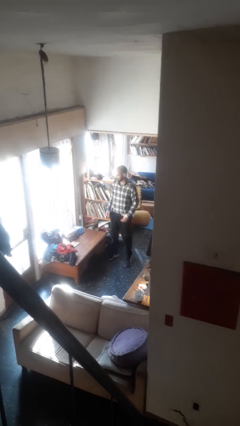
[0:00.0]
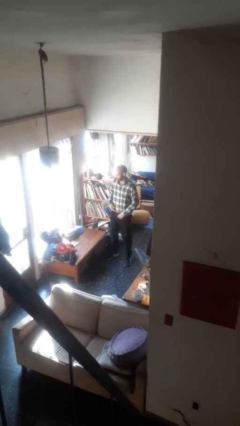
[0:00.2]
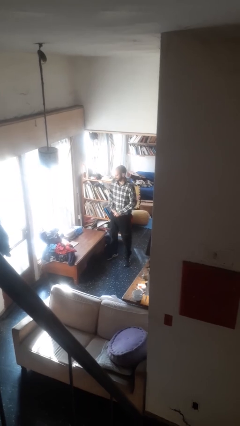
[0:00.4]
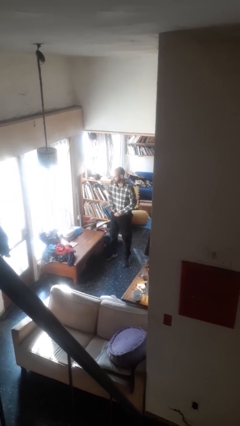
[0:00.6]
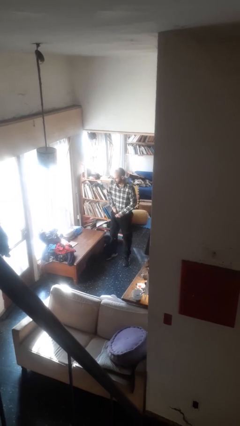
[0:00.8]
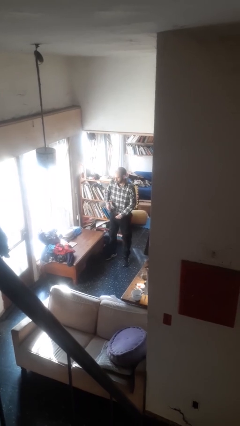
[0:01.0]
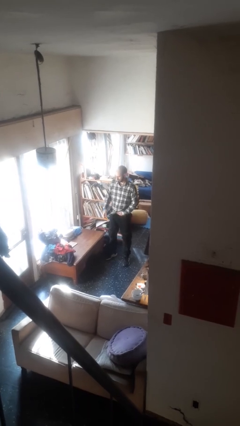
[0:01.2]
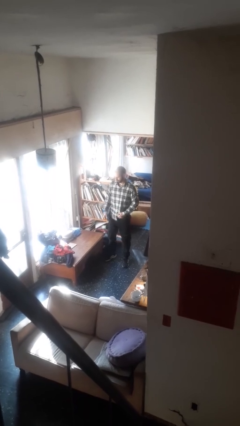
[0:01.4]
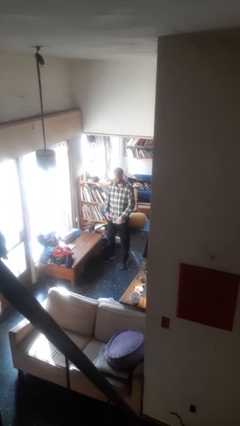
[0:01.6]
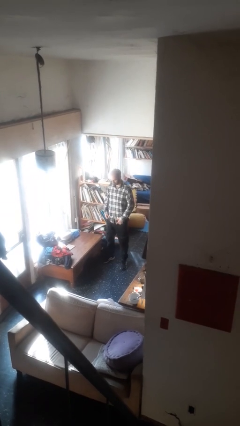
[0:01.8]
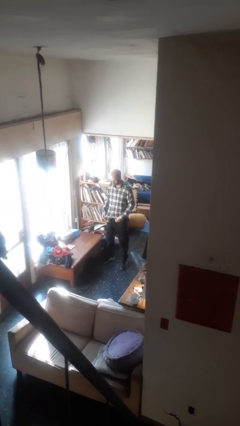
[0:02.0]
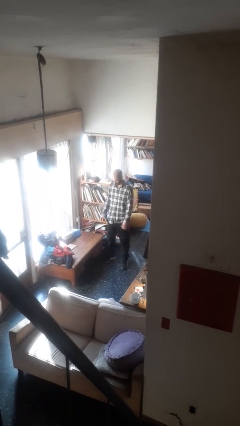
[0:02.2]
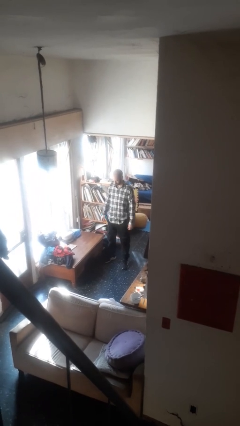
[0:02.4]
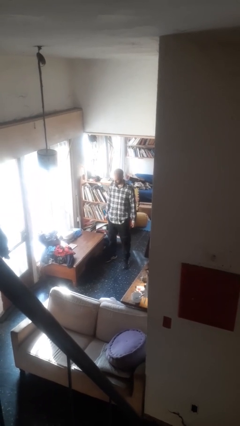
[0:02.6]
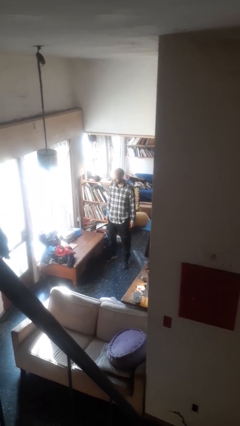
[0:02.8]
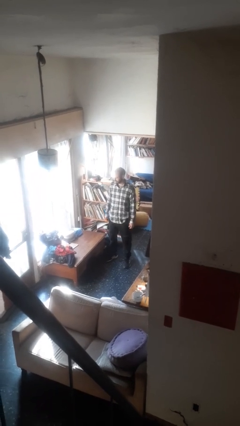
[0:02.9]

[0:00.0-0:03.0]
person untucks shirt

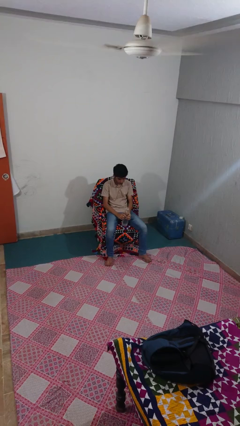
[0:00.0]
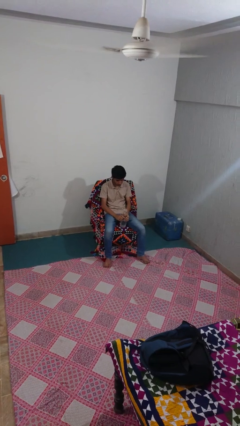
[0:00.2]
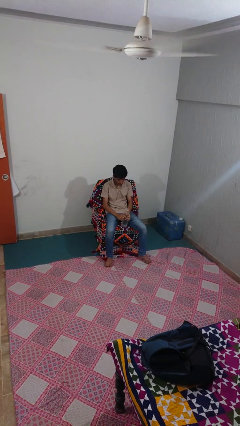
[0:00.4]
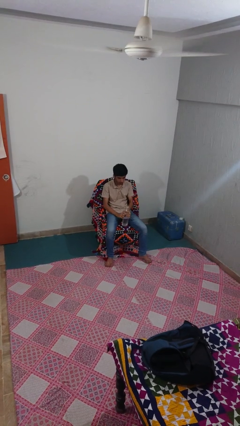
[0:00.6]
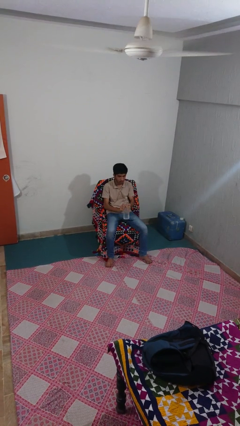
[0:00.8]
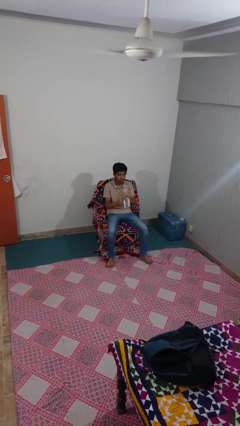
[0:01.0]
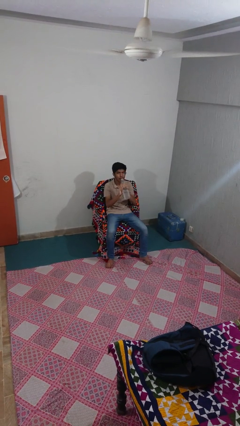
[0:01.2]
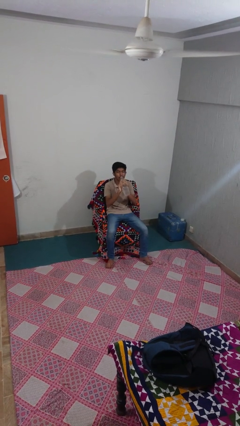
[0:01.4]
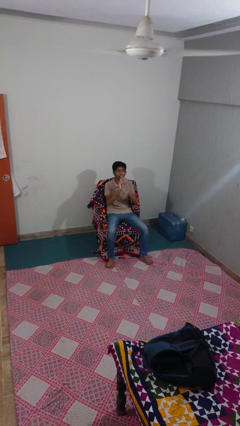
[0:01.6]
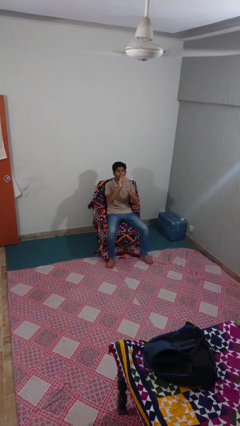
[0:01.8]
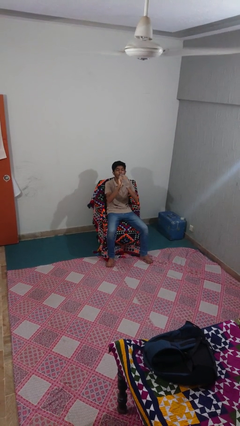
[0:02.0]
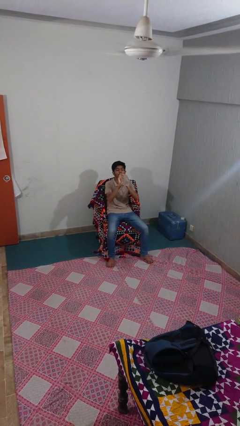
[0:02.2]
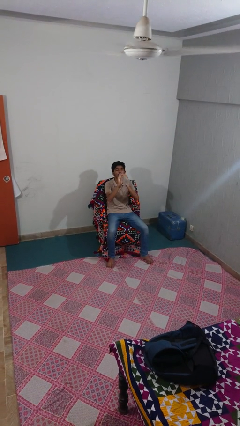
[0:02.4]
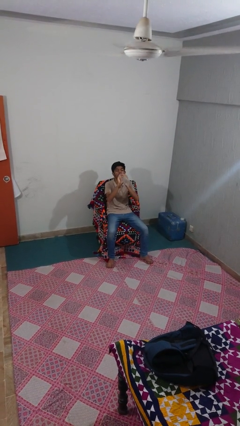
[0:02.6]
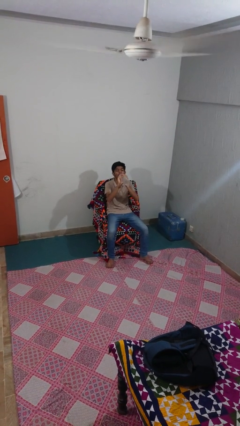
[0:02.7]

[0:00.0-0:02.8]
person drinks from bottle

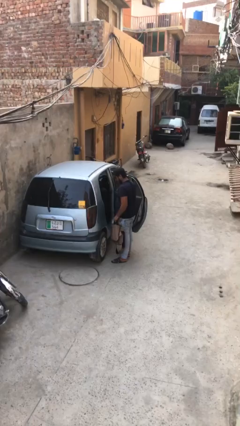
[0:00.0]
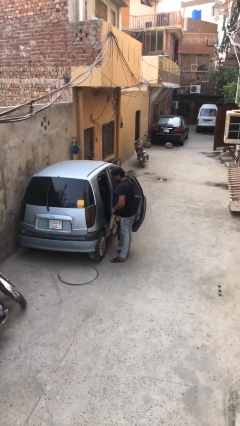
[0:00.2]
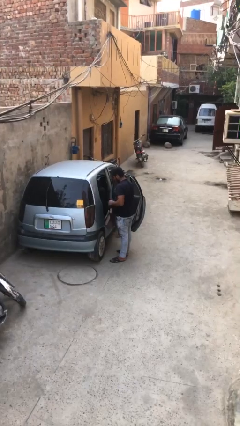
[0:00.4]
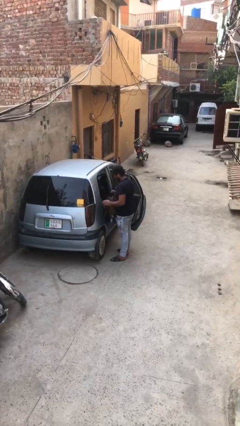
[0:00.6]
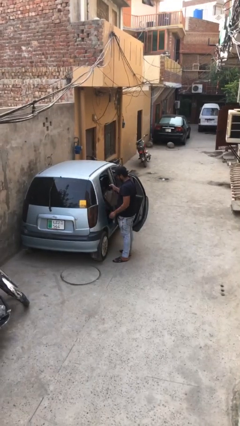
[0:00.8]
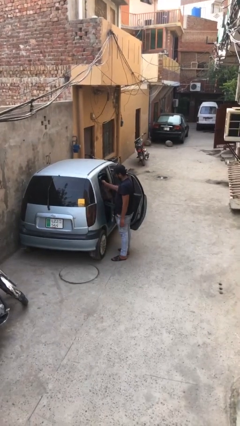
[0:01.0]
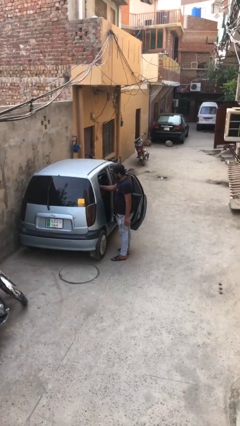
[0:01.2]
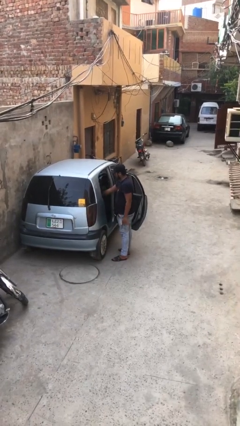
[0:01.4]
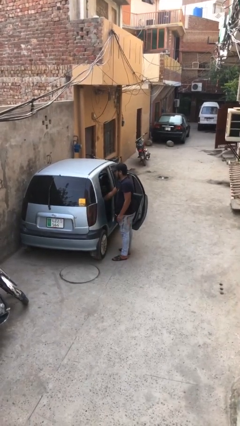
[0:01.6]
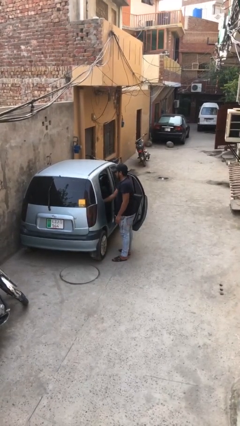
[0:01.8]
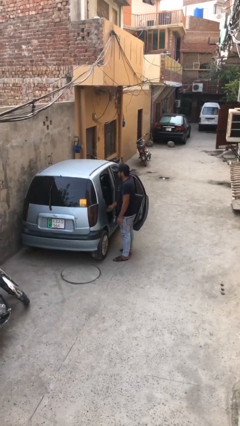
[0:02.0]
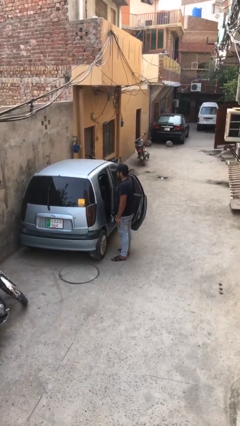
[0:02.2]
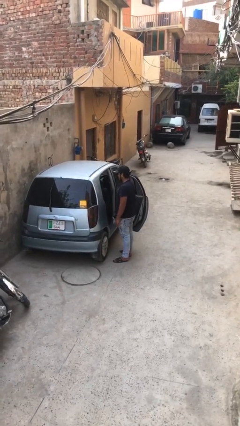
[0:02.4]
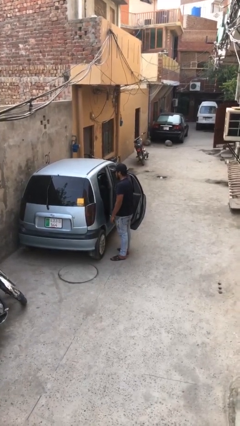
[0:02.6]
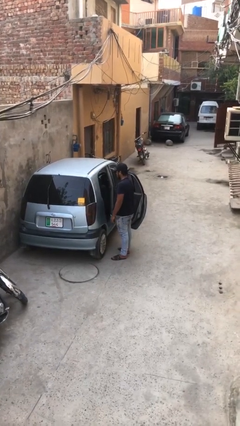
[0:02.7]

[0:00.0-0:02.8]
person loads car

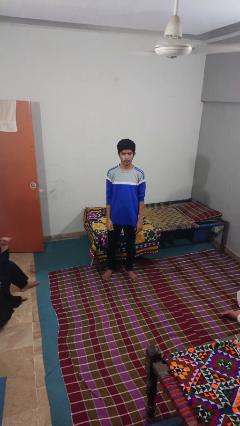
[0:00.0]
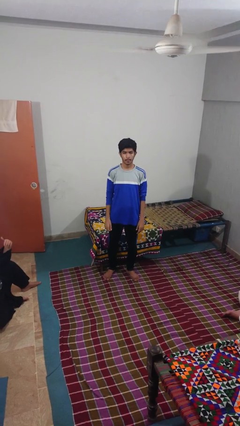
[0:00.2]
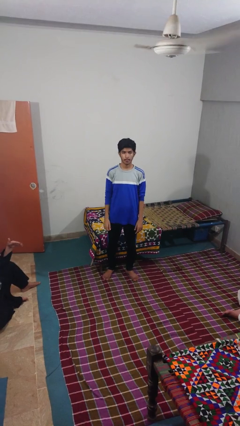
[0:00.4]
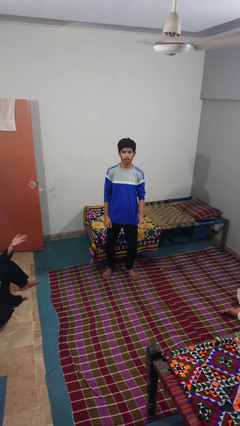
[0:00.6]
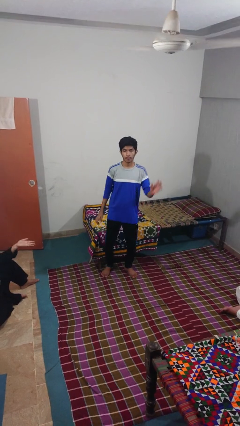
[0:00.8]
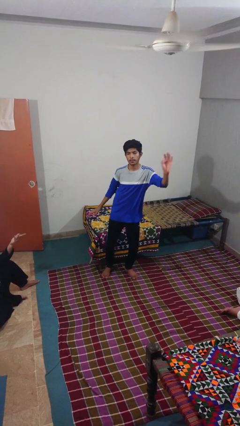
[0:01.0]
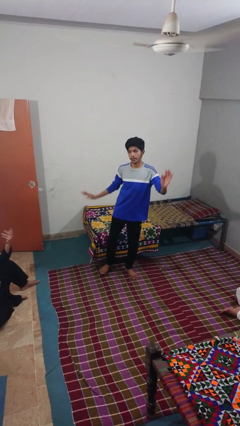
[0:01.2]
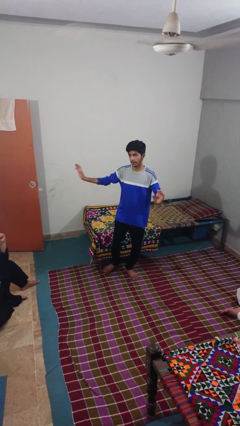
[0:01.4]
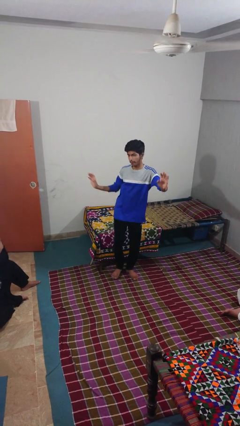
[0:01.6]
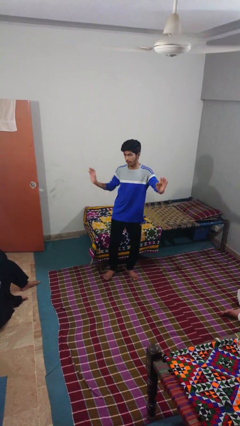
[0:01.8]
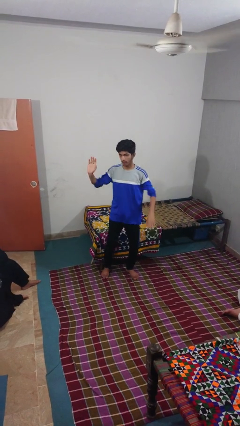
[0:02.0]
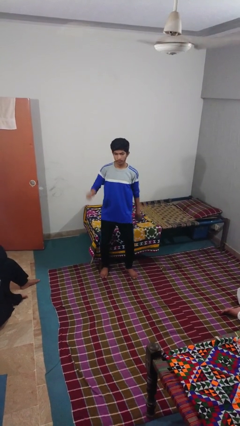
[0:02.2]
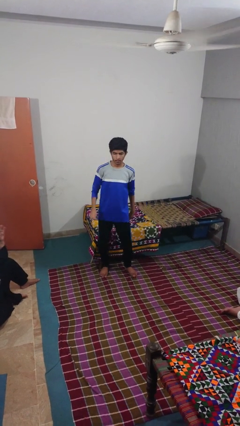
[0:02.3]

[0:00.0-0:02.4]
person dances in place

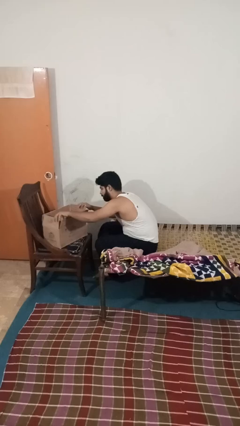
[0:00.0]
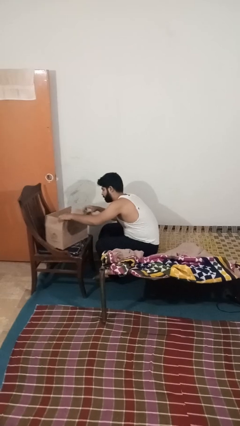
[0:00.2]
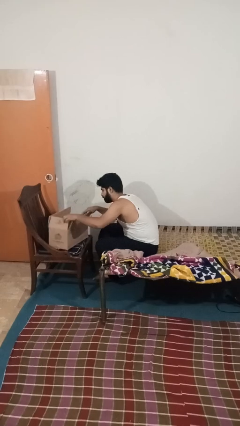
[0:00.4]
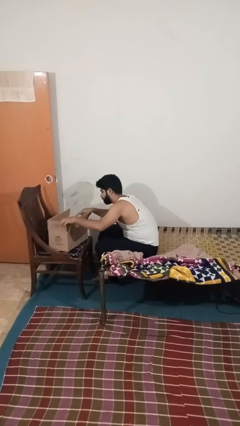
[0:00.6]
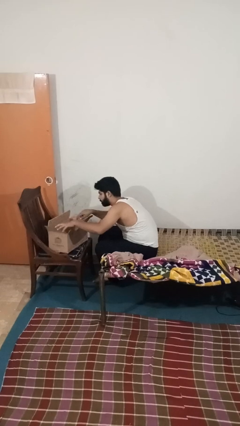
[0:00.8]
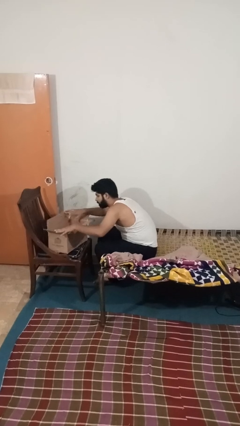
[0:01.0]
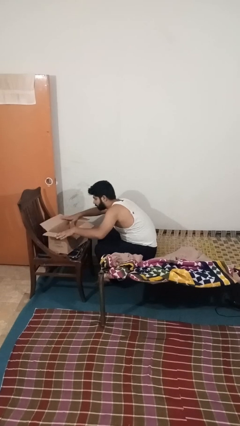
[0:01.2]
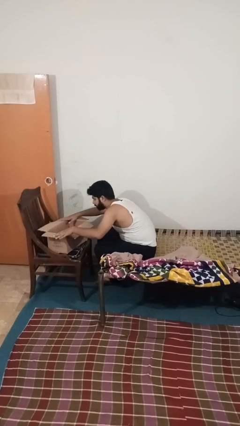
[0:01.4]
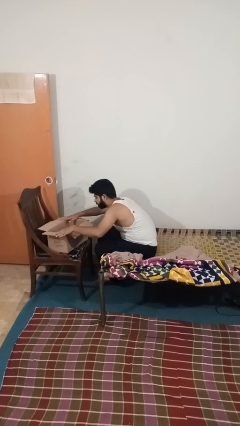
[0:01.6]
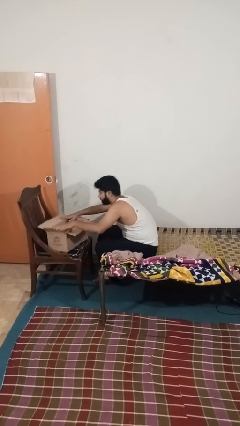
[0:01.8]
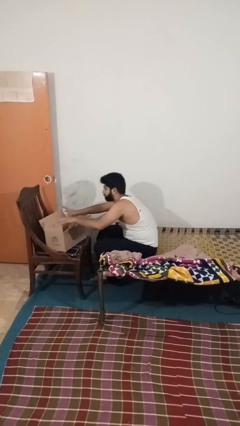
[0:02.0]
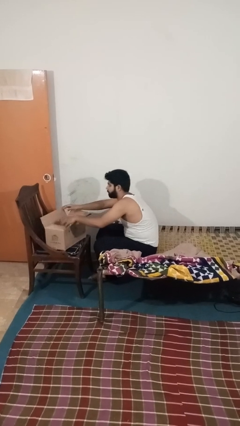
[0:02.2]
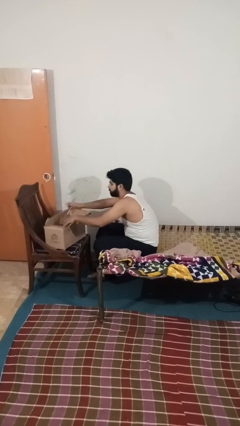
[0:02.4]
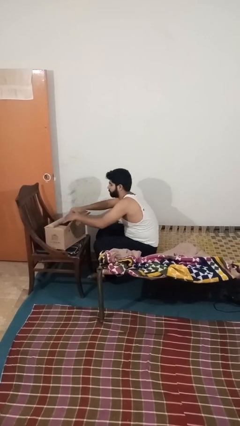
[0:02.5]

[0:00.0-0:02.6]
person opens box

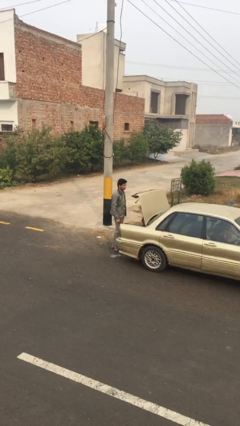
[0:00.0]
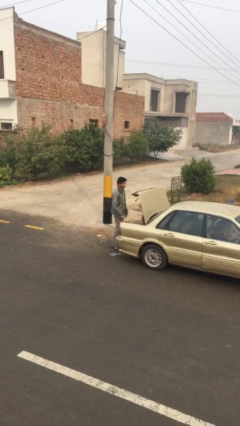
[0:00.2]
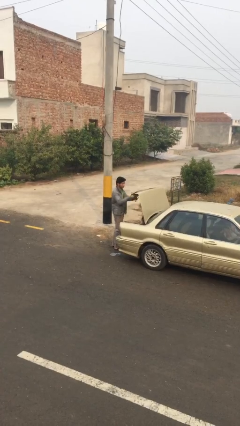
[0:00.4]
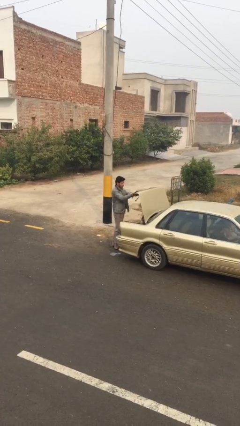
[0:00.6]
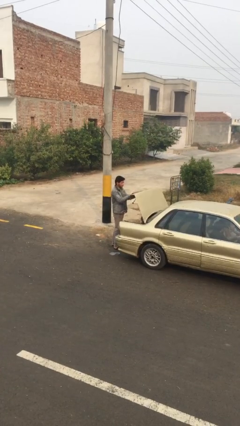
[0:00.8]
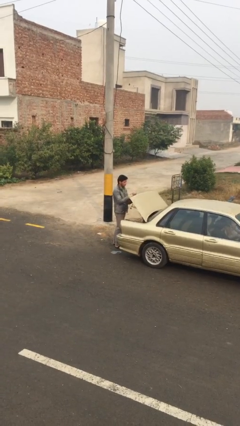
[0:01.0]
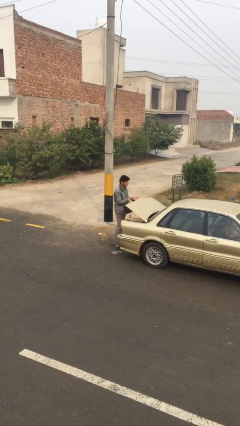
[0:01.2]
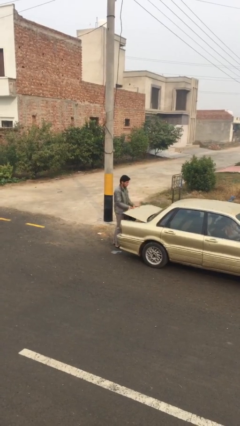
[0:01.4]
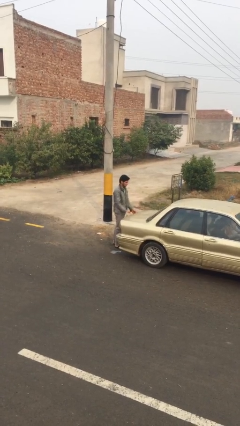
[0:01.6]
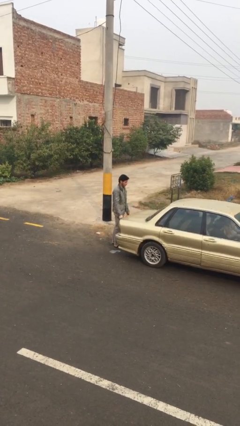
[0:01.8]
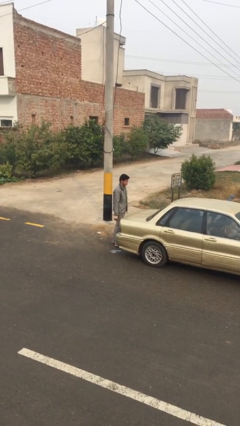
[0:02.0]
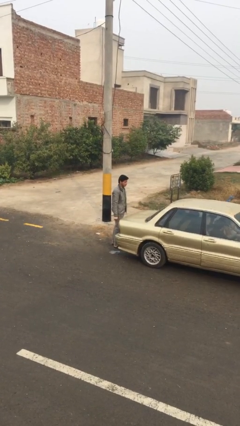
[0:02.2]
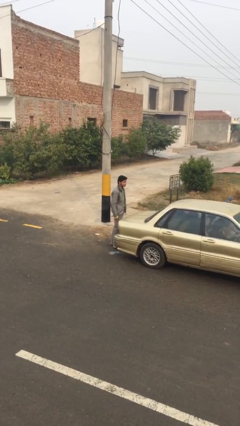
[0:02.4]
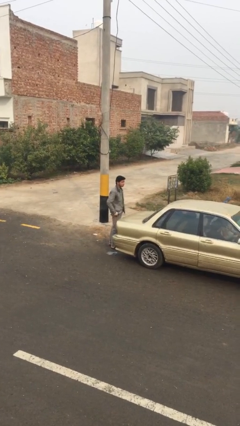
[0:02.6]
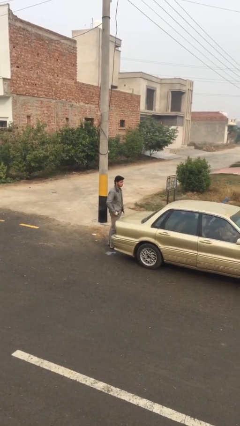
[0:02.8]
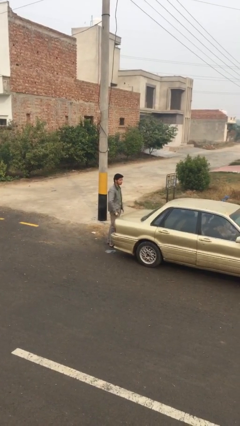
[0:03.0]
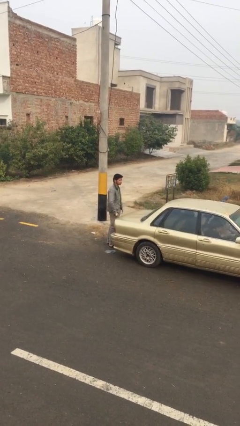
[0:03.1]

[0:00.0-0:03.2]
person closes car trunk

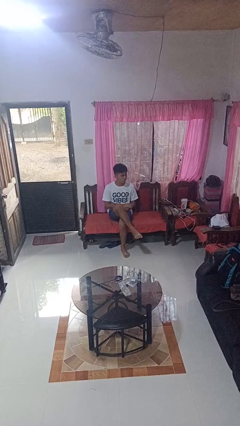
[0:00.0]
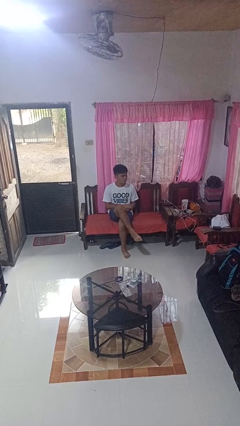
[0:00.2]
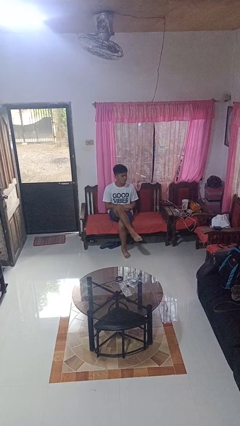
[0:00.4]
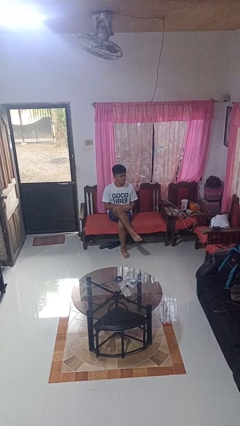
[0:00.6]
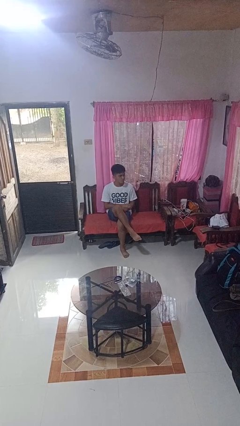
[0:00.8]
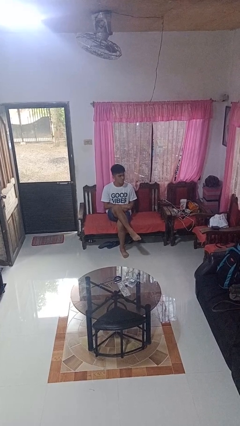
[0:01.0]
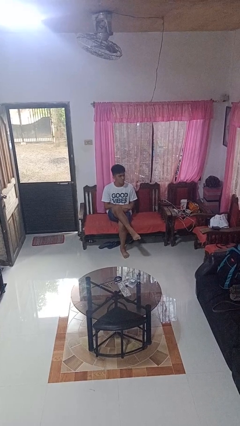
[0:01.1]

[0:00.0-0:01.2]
person crosses legs
